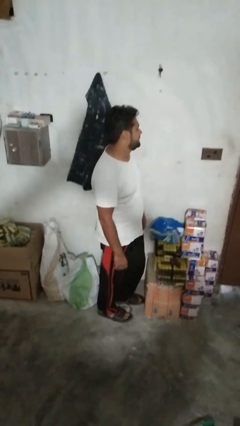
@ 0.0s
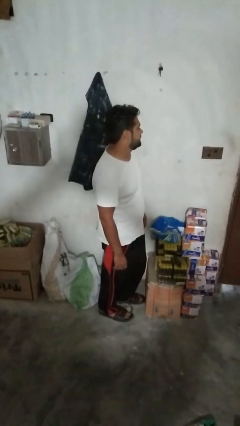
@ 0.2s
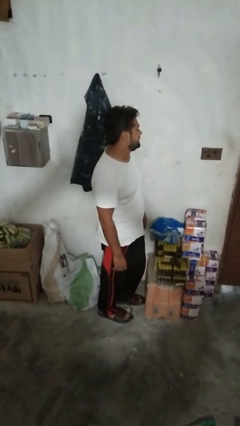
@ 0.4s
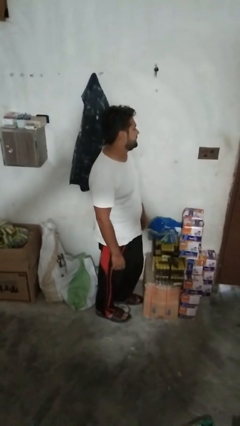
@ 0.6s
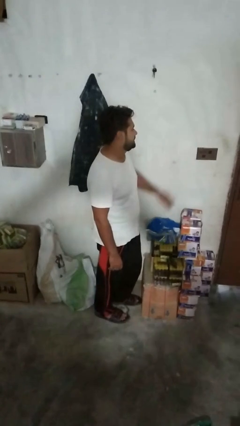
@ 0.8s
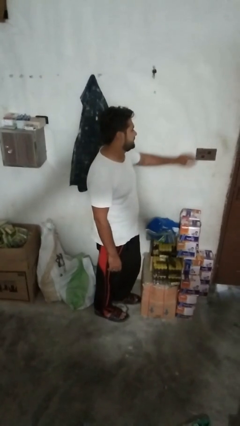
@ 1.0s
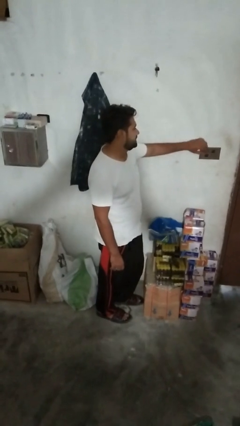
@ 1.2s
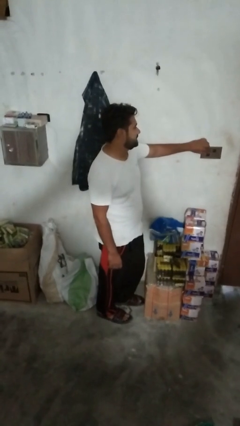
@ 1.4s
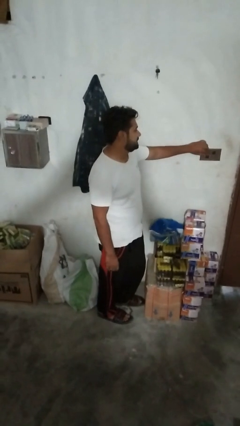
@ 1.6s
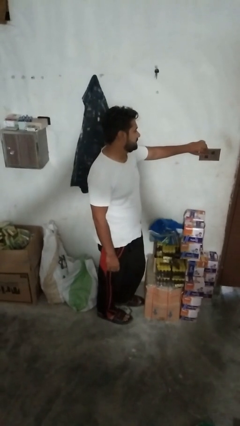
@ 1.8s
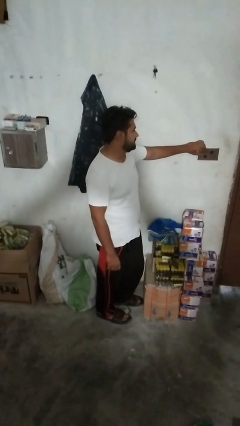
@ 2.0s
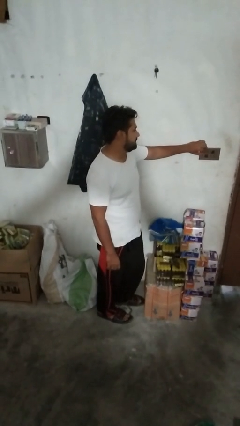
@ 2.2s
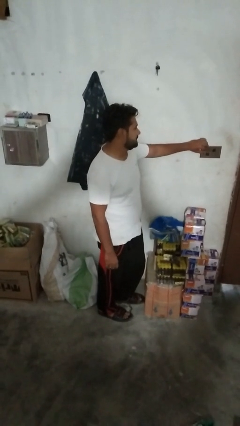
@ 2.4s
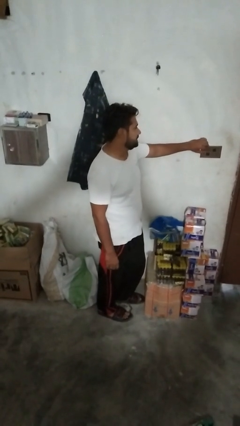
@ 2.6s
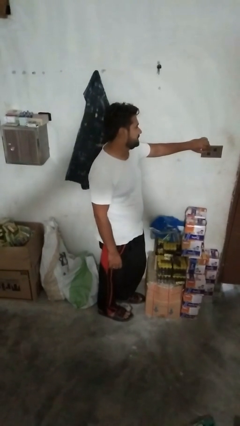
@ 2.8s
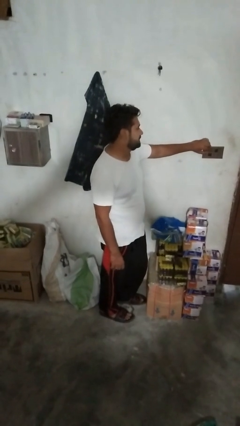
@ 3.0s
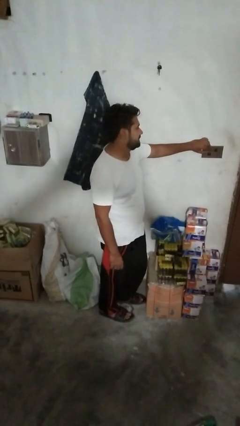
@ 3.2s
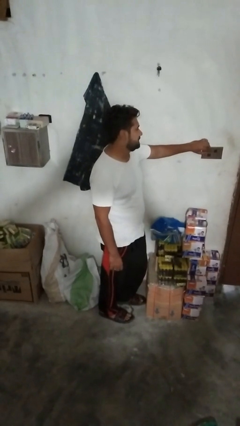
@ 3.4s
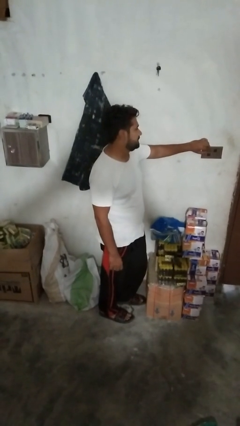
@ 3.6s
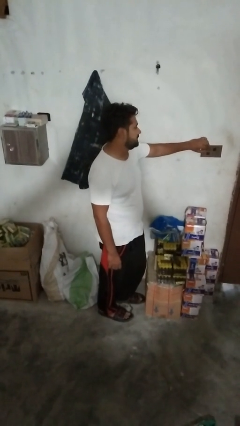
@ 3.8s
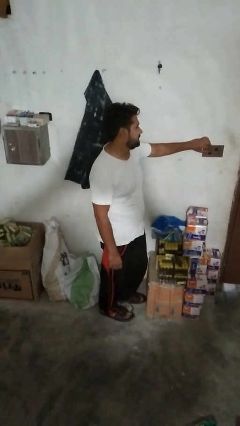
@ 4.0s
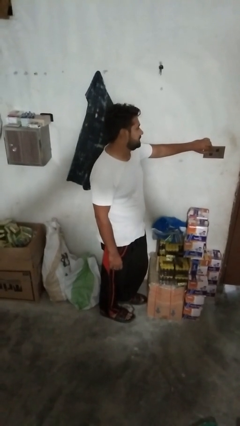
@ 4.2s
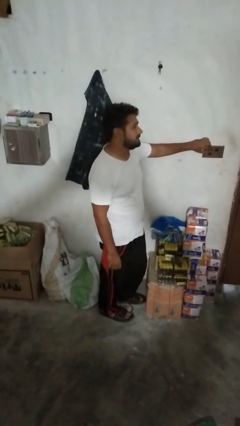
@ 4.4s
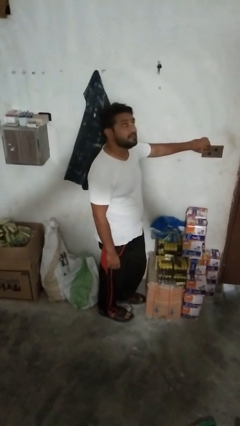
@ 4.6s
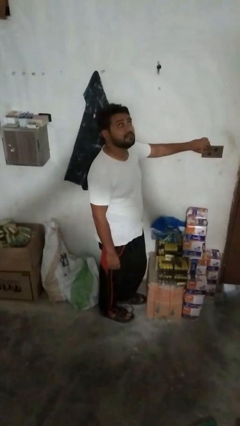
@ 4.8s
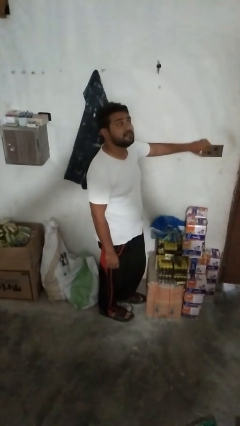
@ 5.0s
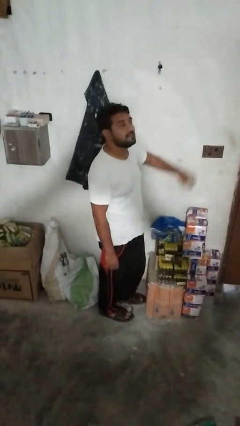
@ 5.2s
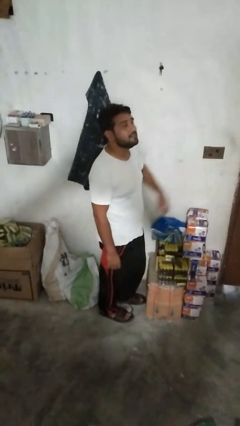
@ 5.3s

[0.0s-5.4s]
person adjusts thermostat

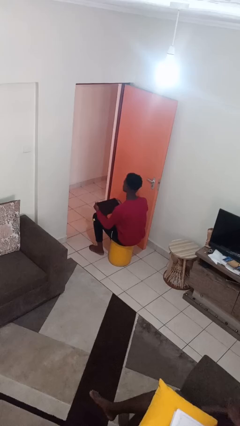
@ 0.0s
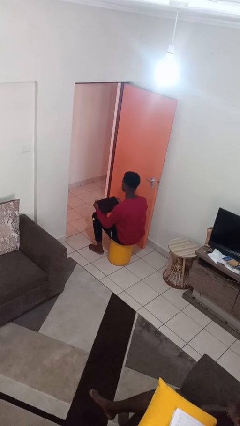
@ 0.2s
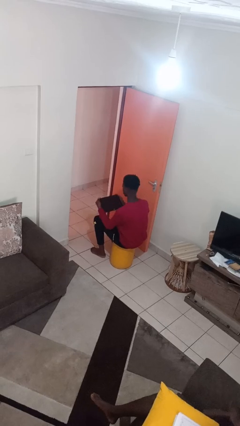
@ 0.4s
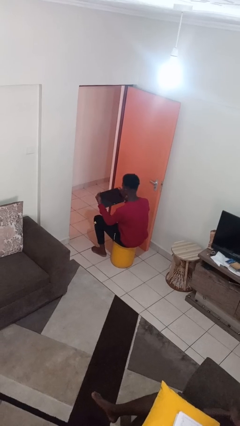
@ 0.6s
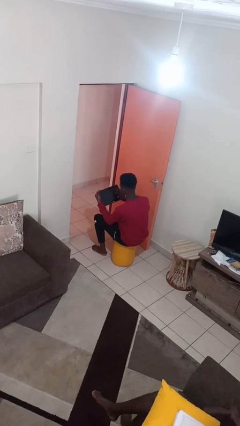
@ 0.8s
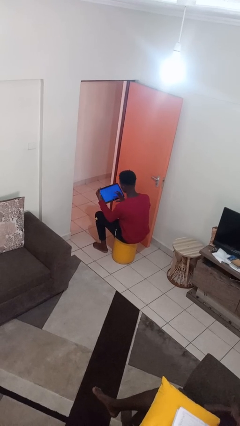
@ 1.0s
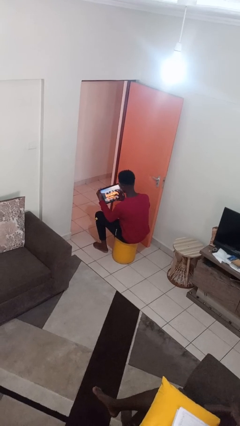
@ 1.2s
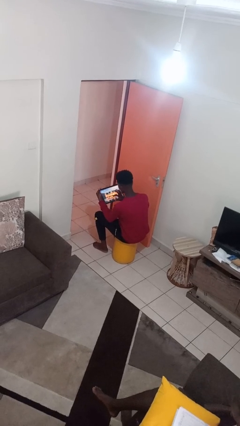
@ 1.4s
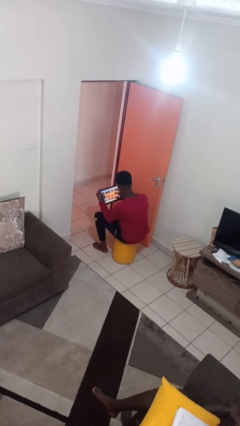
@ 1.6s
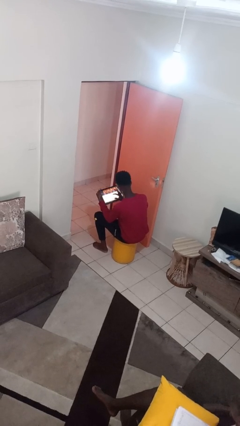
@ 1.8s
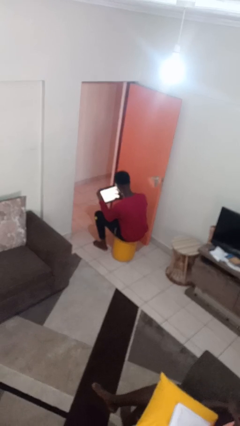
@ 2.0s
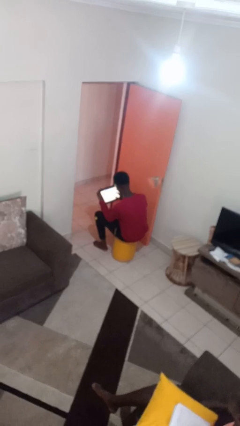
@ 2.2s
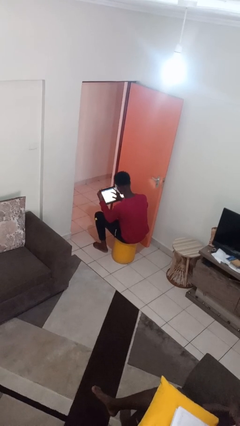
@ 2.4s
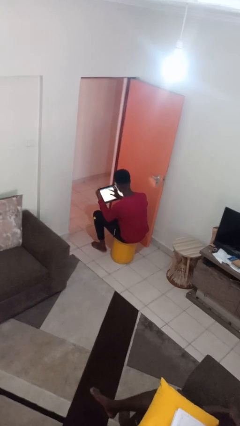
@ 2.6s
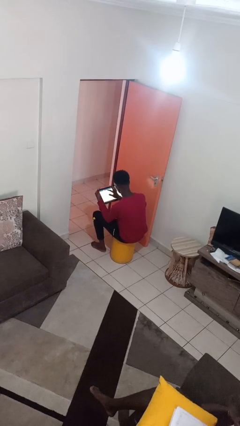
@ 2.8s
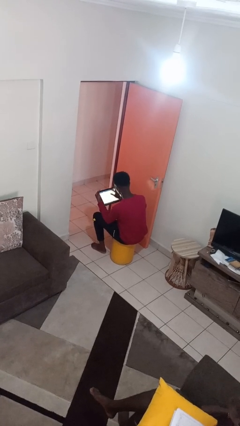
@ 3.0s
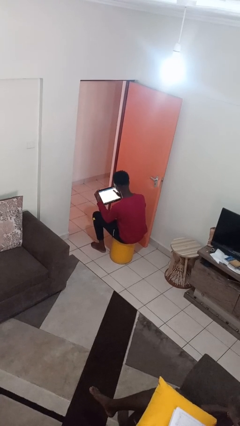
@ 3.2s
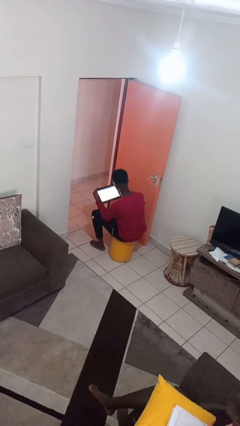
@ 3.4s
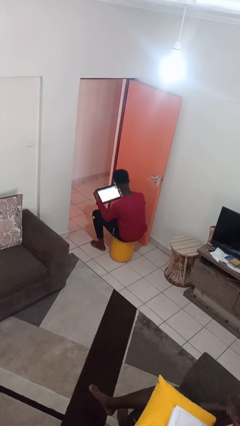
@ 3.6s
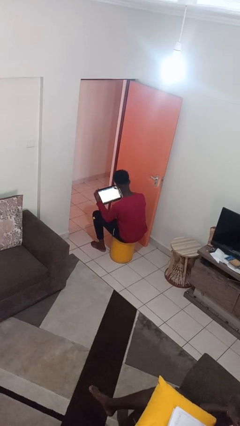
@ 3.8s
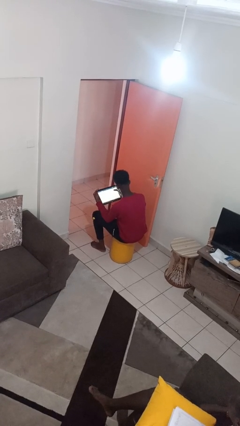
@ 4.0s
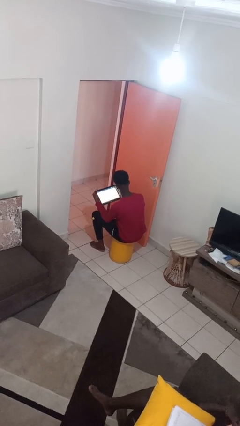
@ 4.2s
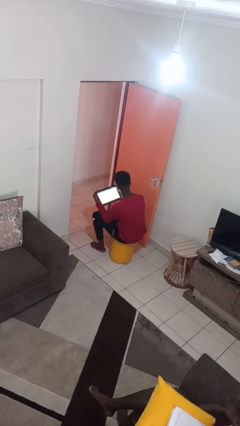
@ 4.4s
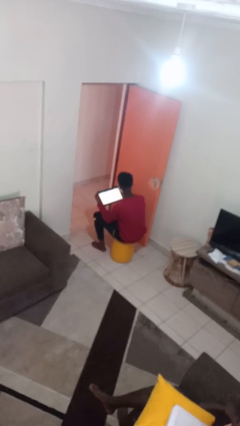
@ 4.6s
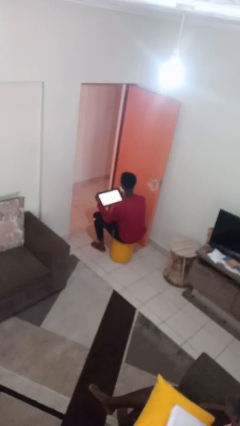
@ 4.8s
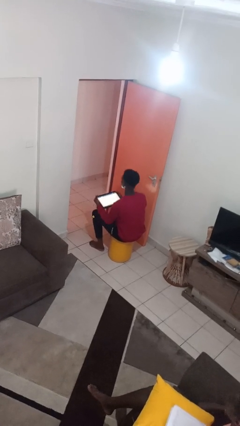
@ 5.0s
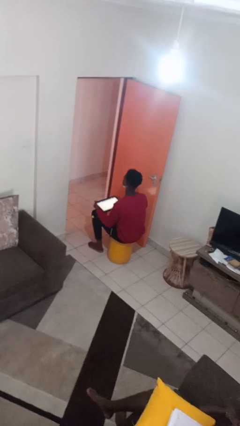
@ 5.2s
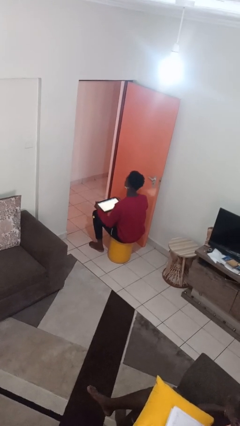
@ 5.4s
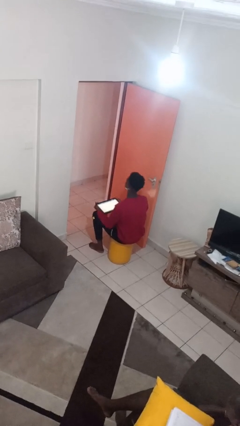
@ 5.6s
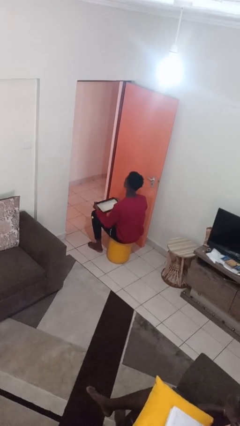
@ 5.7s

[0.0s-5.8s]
person interacts with tablet

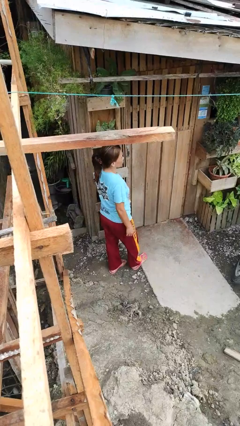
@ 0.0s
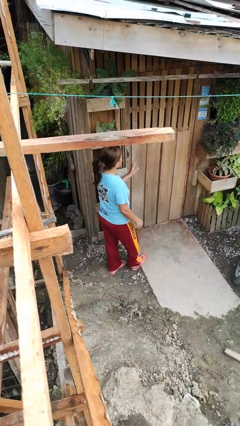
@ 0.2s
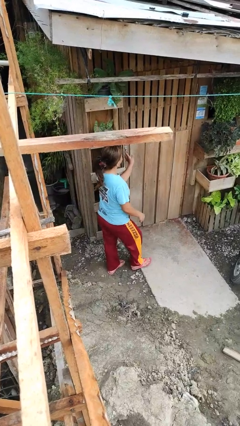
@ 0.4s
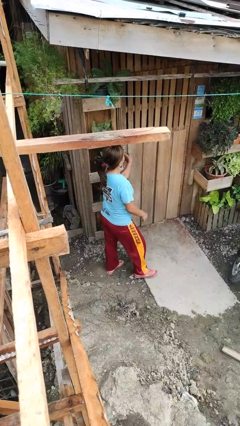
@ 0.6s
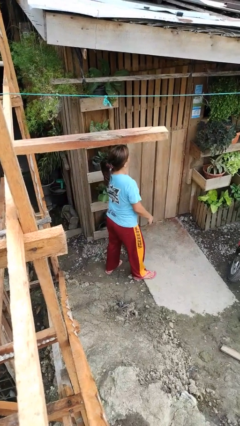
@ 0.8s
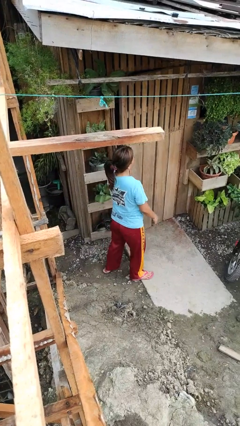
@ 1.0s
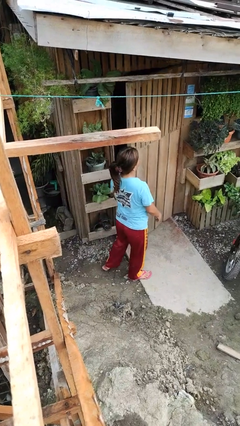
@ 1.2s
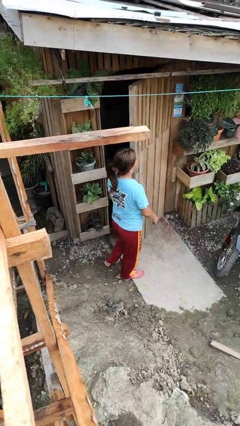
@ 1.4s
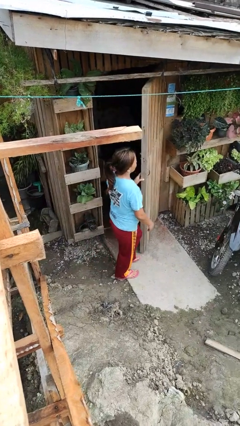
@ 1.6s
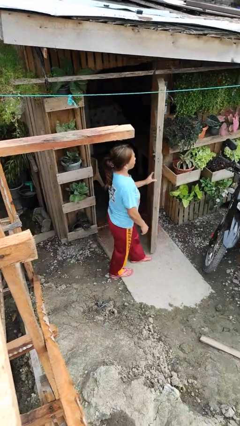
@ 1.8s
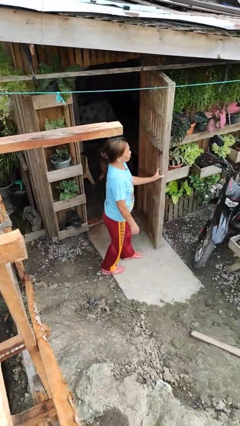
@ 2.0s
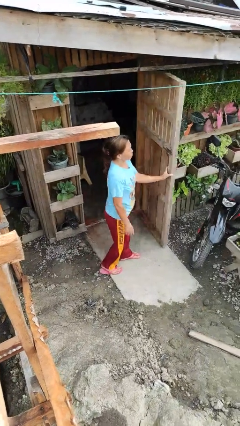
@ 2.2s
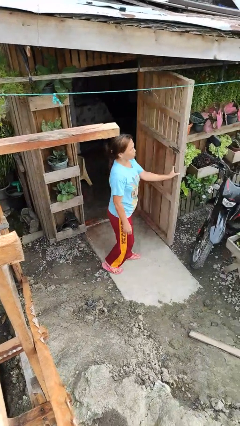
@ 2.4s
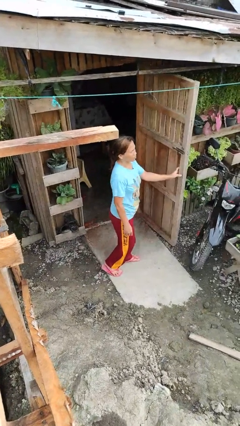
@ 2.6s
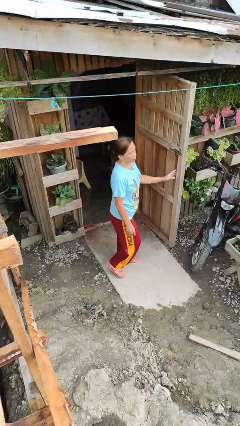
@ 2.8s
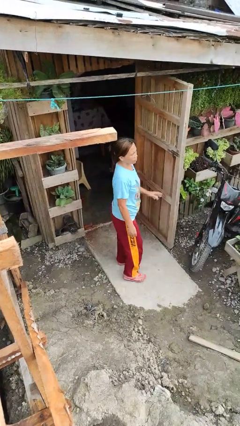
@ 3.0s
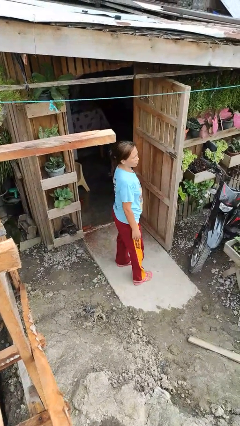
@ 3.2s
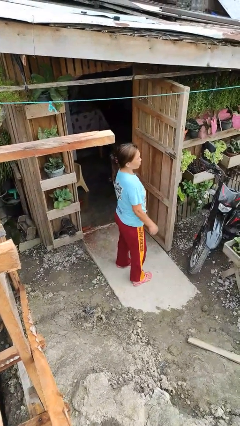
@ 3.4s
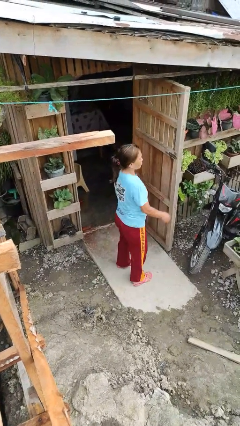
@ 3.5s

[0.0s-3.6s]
person opens facility door

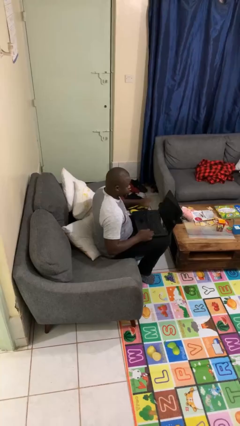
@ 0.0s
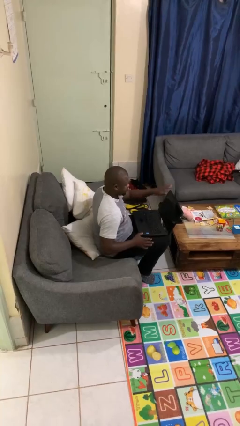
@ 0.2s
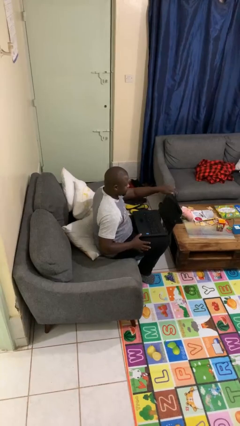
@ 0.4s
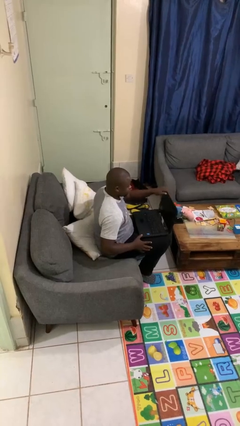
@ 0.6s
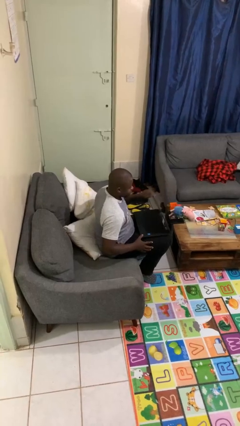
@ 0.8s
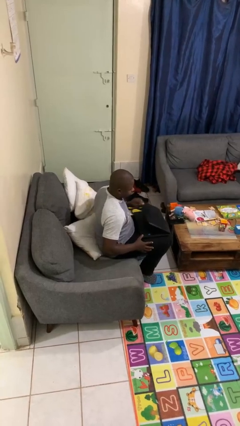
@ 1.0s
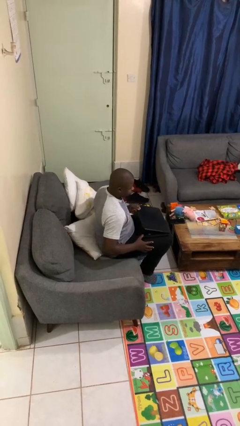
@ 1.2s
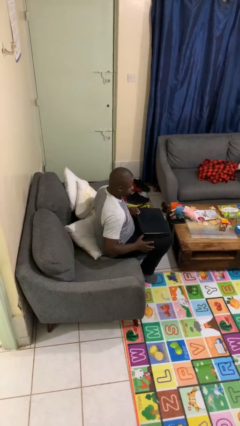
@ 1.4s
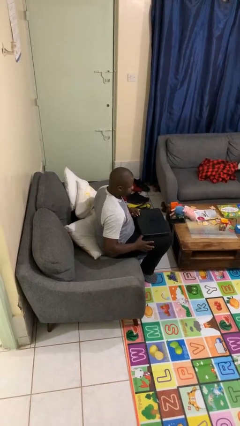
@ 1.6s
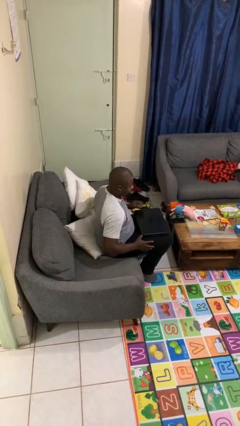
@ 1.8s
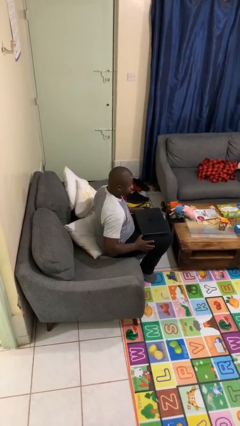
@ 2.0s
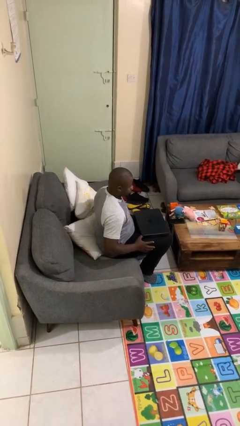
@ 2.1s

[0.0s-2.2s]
person closes laptop

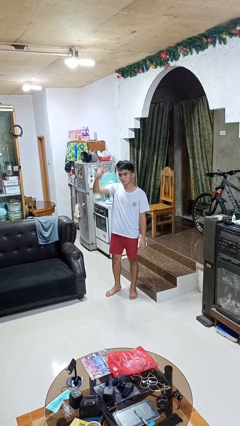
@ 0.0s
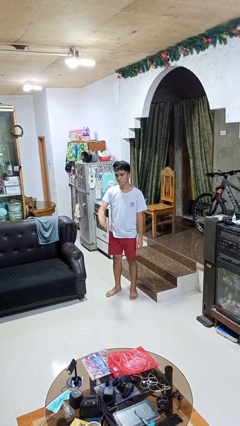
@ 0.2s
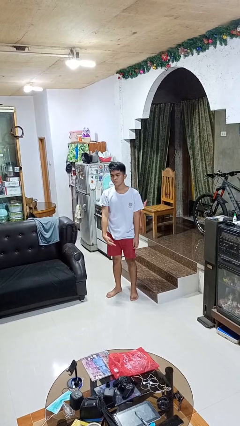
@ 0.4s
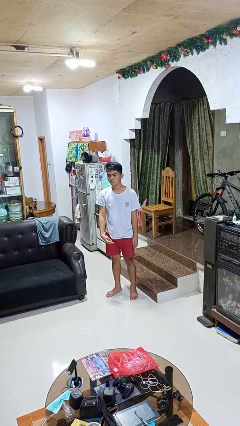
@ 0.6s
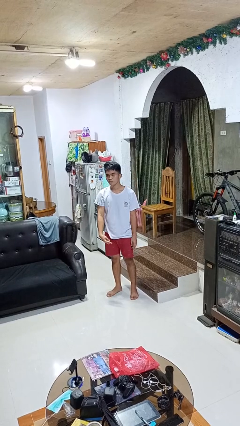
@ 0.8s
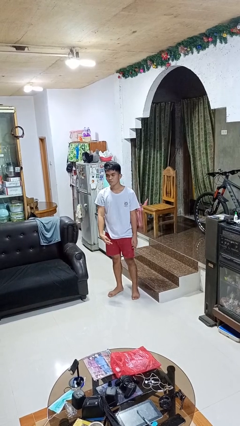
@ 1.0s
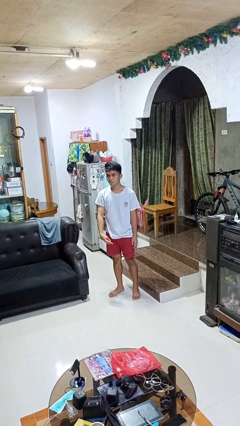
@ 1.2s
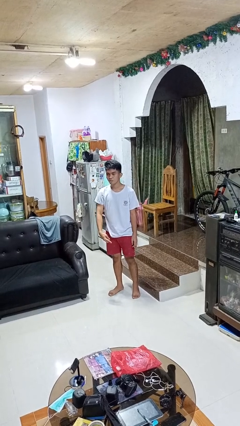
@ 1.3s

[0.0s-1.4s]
person gestures swipe down
